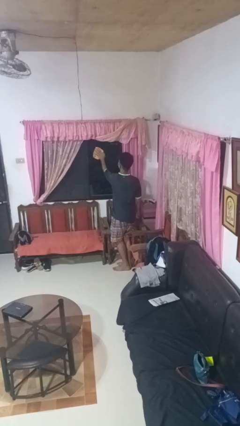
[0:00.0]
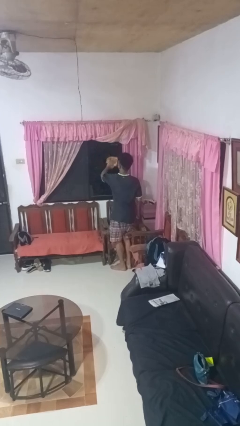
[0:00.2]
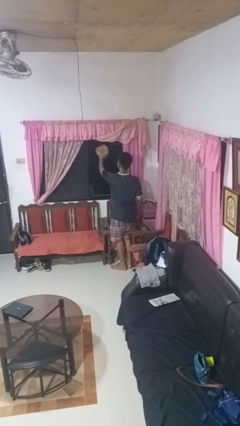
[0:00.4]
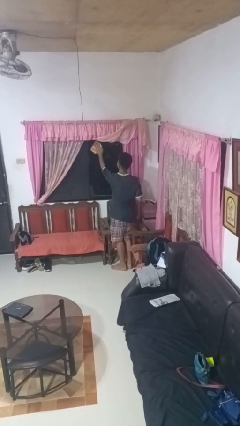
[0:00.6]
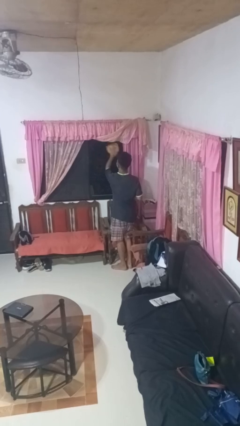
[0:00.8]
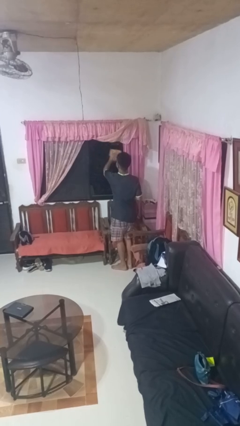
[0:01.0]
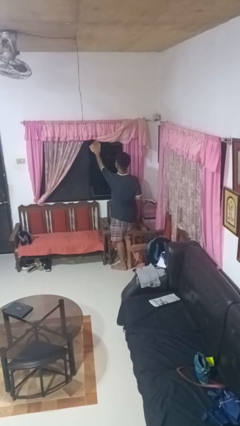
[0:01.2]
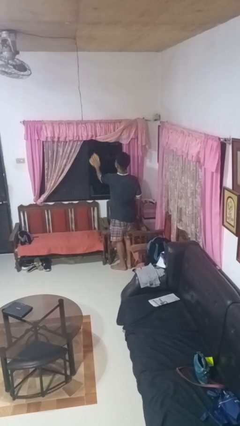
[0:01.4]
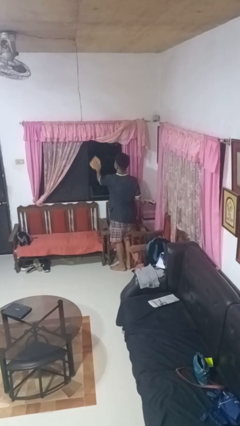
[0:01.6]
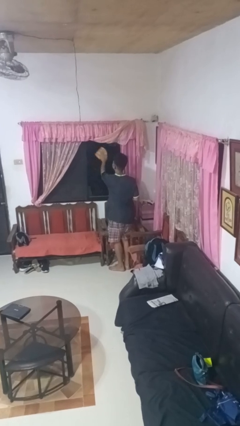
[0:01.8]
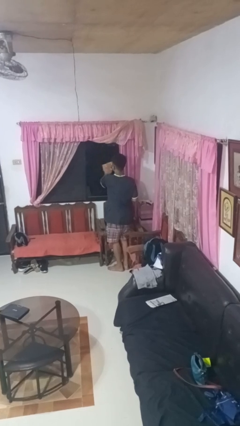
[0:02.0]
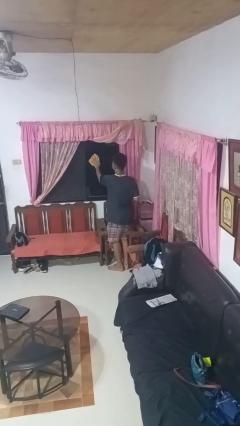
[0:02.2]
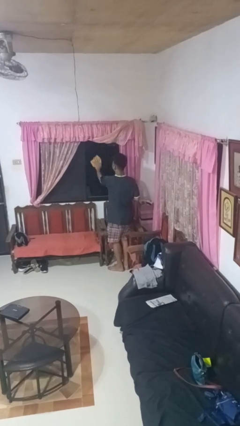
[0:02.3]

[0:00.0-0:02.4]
person washes window

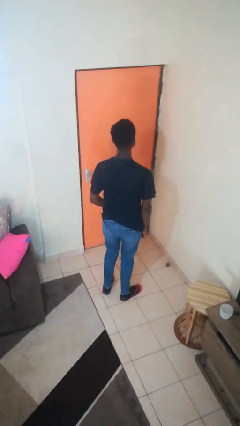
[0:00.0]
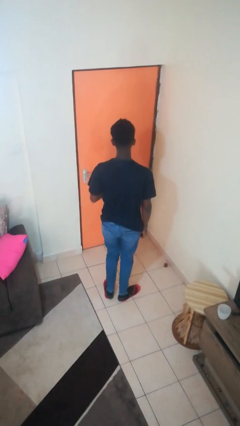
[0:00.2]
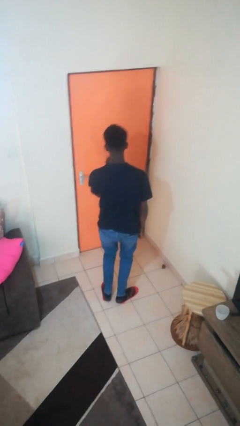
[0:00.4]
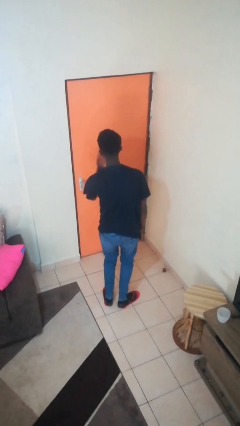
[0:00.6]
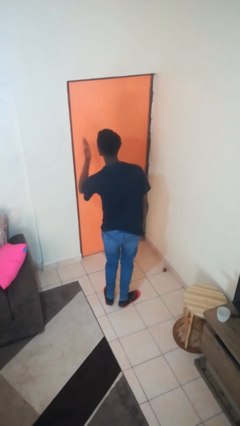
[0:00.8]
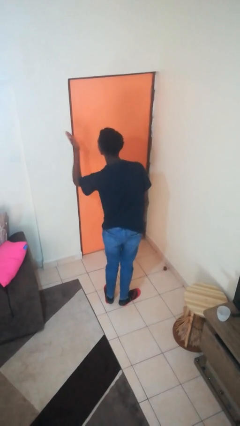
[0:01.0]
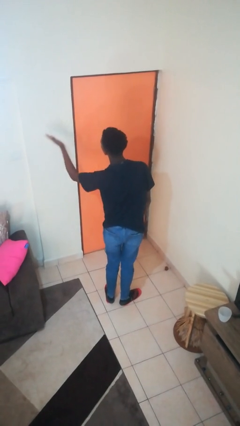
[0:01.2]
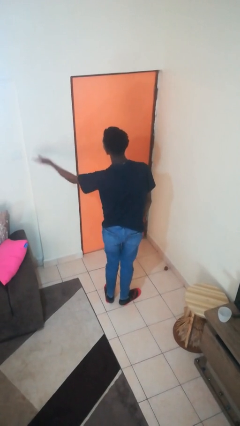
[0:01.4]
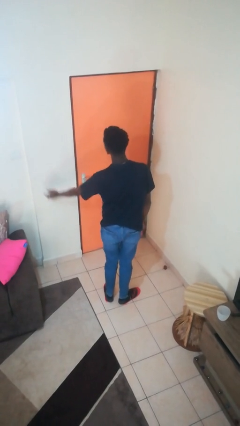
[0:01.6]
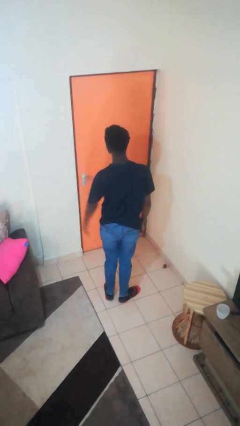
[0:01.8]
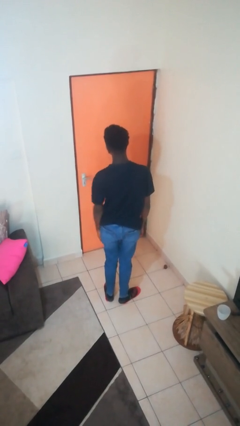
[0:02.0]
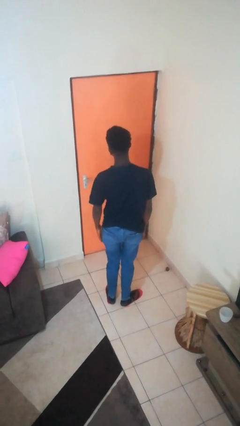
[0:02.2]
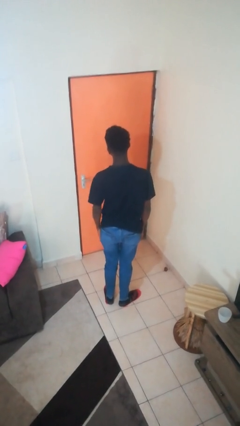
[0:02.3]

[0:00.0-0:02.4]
person gestures blow kiss

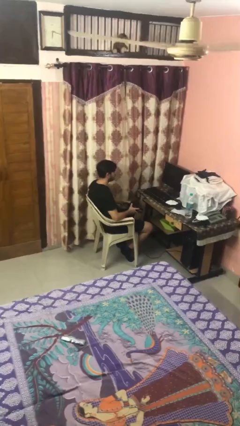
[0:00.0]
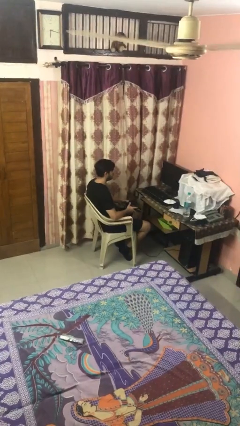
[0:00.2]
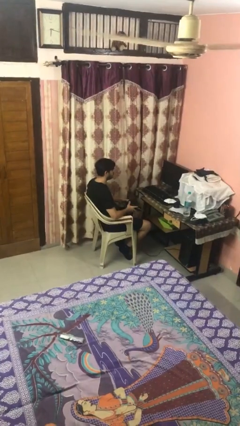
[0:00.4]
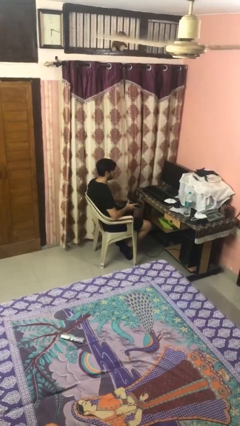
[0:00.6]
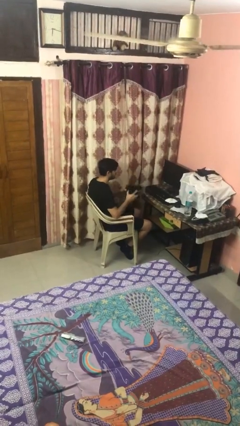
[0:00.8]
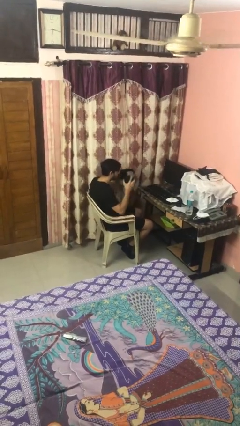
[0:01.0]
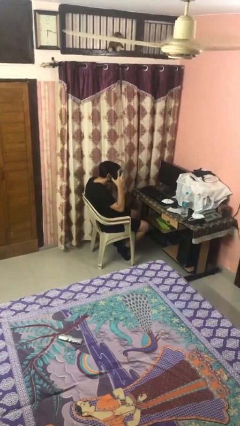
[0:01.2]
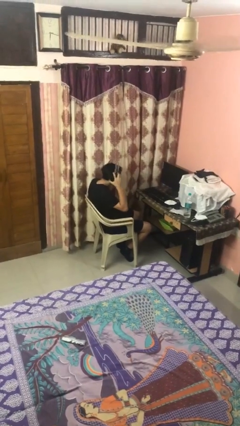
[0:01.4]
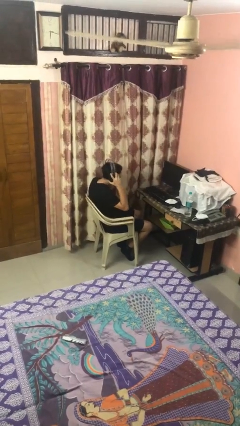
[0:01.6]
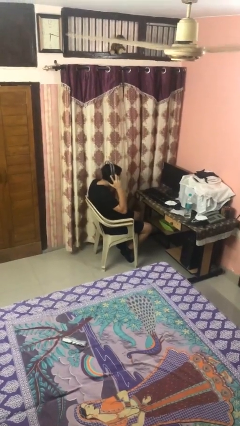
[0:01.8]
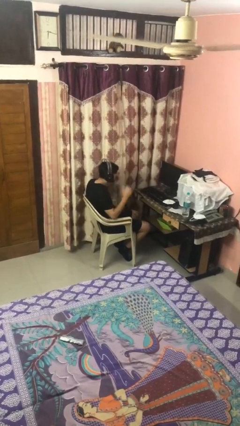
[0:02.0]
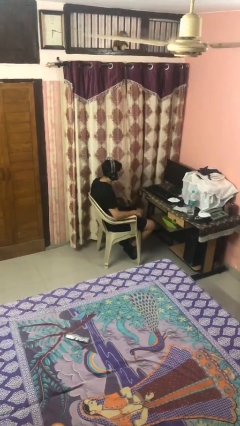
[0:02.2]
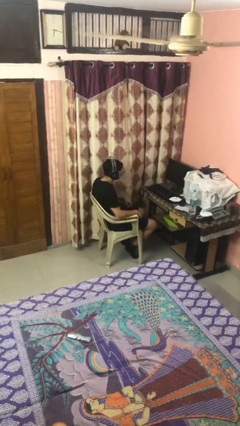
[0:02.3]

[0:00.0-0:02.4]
person puts on headphones

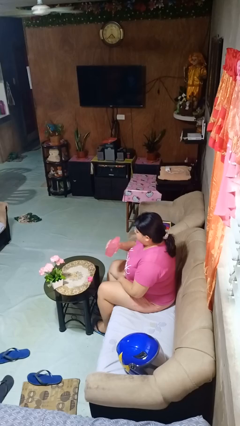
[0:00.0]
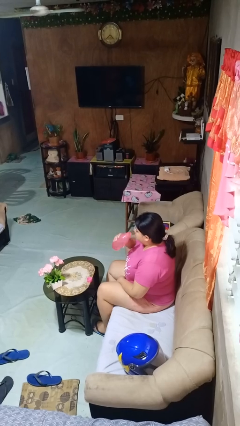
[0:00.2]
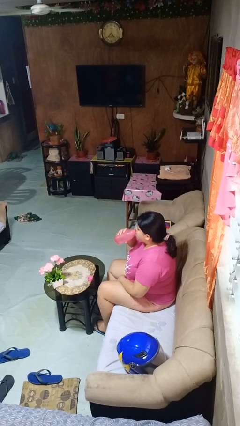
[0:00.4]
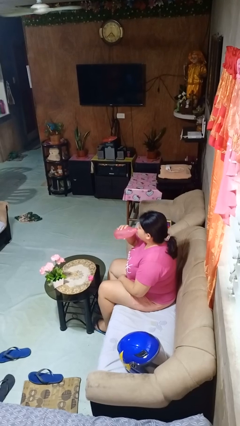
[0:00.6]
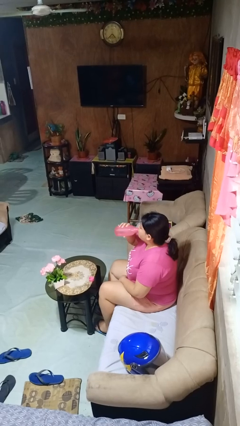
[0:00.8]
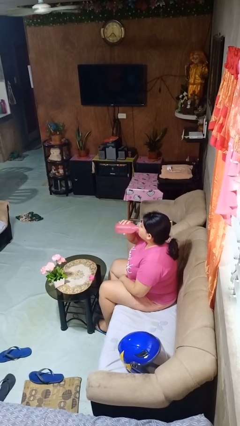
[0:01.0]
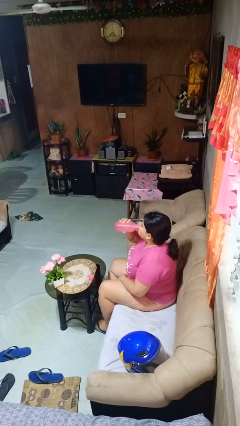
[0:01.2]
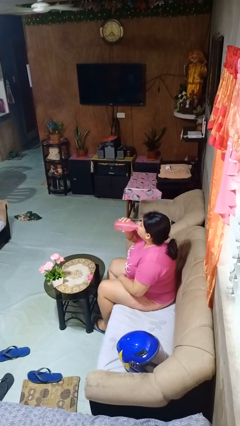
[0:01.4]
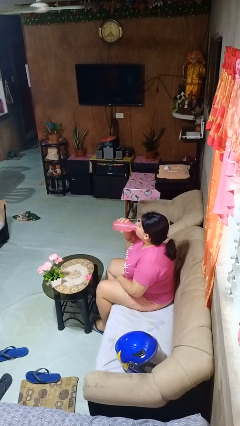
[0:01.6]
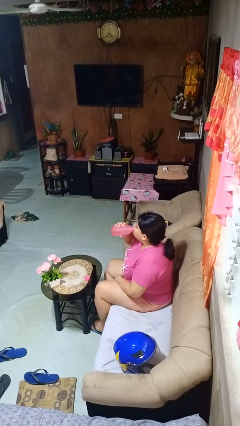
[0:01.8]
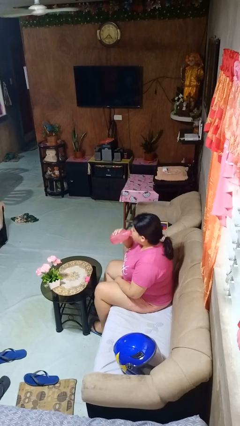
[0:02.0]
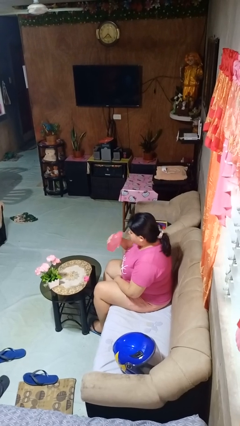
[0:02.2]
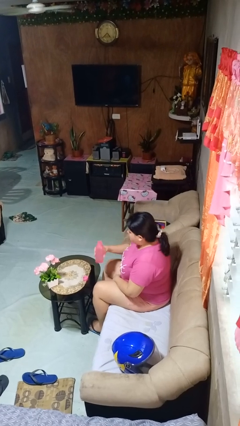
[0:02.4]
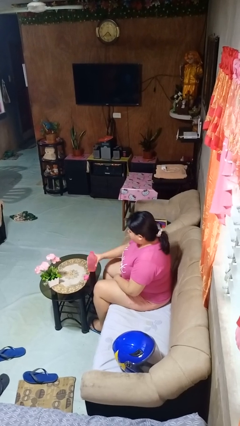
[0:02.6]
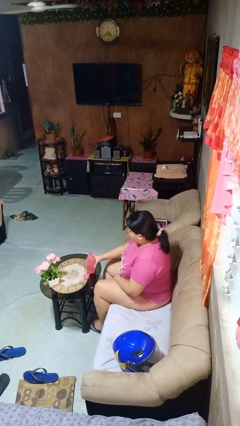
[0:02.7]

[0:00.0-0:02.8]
person drinks from bottle

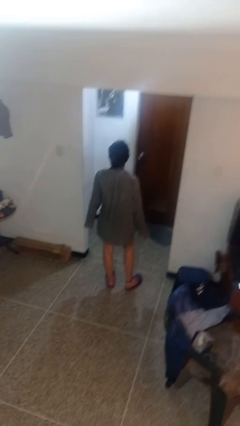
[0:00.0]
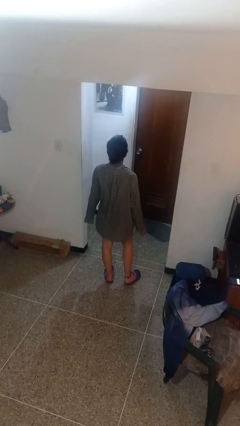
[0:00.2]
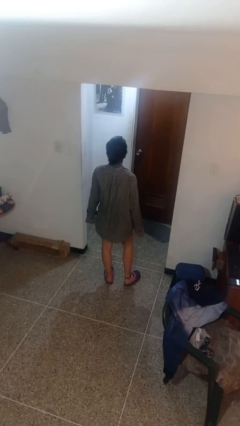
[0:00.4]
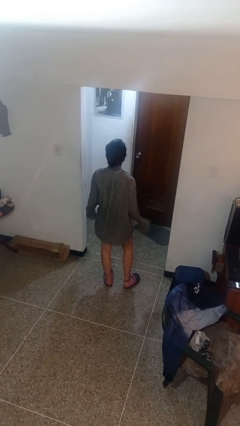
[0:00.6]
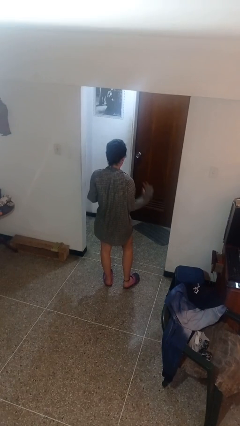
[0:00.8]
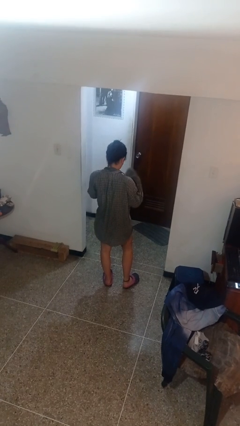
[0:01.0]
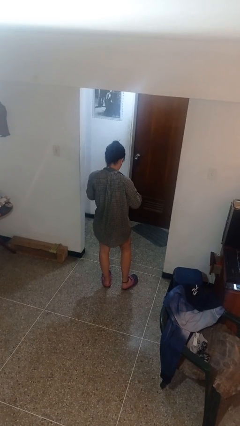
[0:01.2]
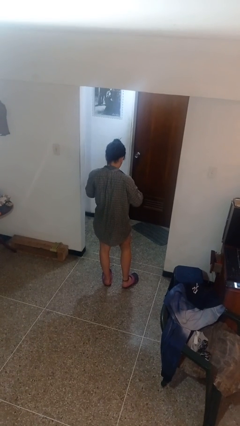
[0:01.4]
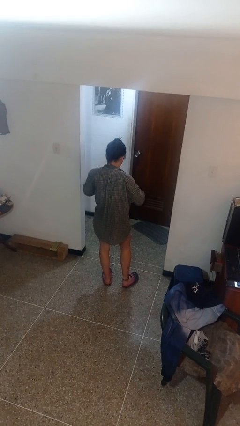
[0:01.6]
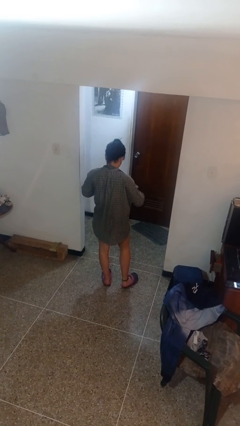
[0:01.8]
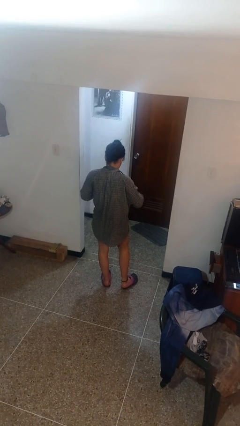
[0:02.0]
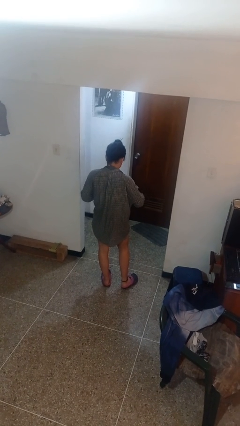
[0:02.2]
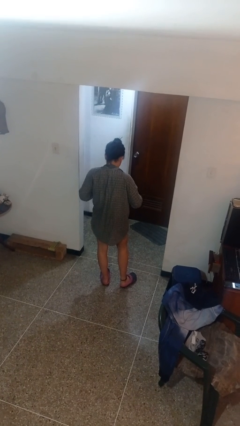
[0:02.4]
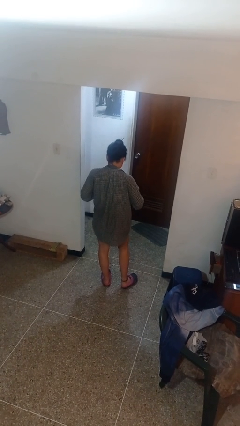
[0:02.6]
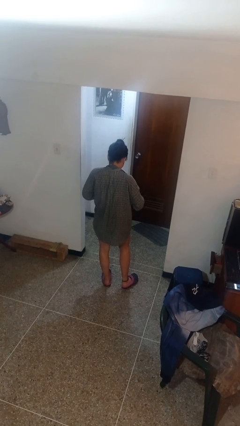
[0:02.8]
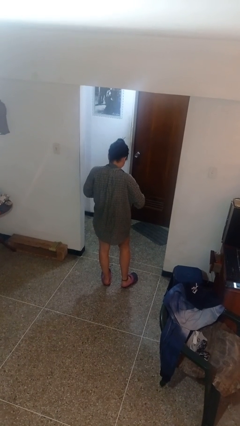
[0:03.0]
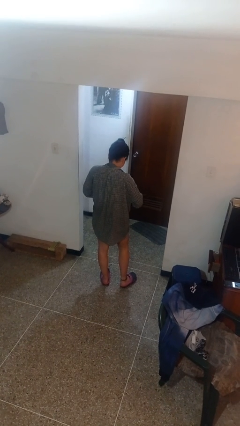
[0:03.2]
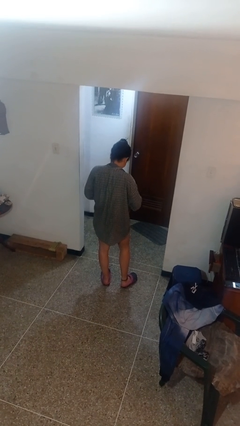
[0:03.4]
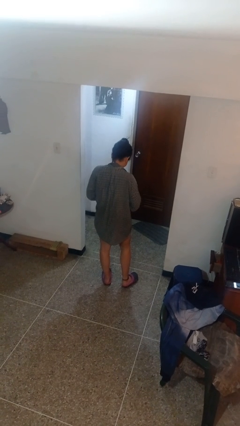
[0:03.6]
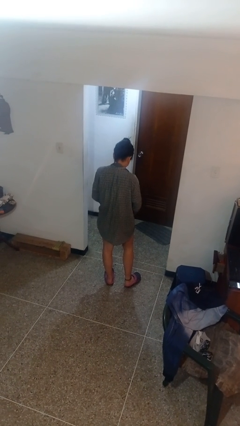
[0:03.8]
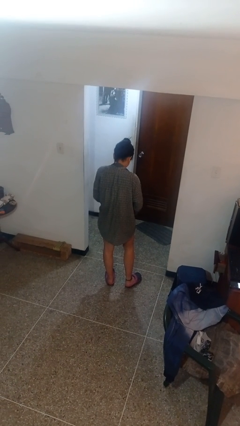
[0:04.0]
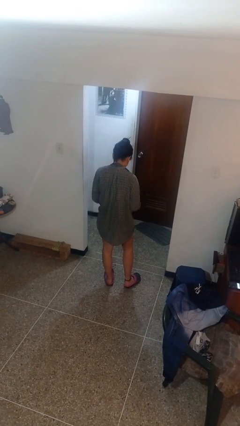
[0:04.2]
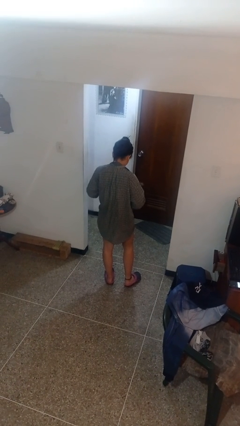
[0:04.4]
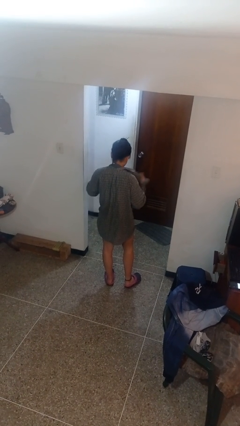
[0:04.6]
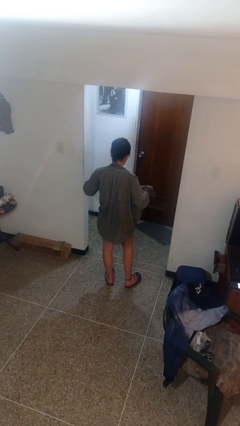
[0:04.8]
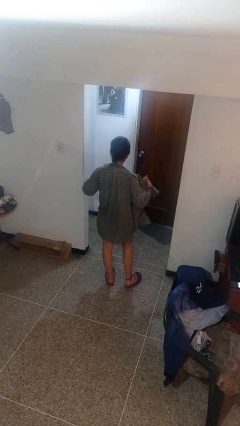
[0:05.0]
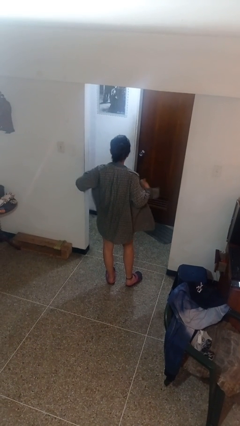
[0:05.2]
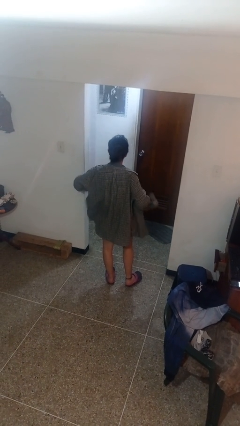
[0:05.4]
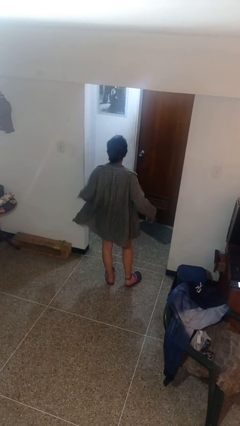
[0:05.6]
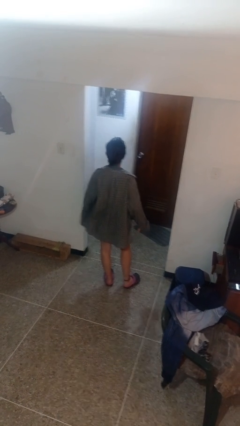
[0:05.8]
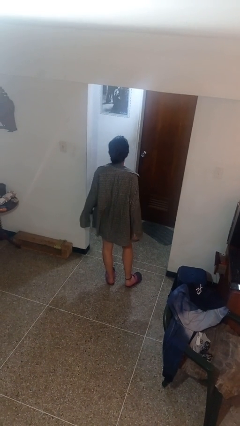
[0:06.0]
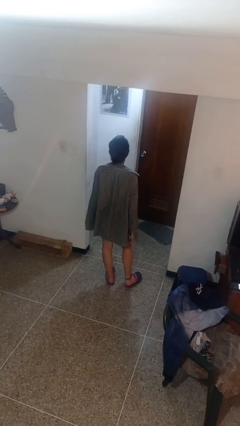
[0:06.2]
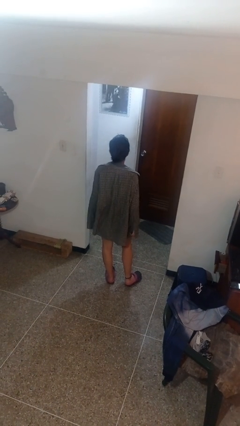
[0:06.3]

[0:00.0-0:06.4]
person unbuttons shirt

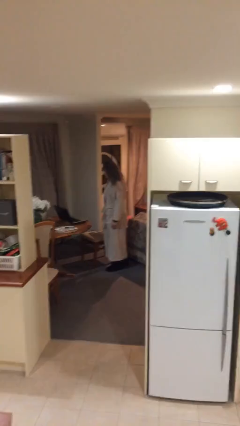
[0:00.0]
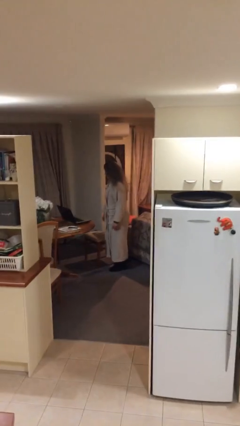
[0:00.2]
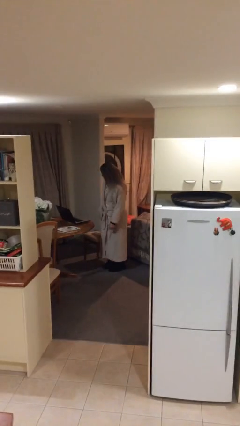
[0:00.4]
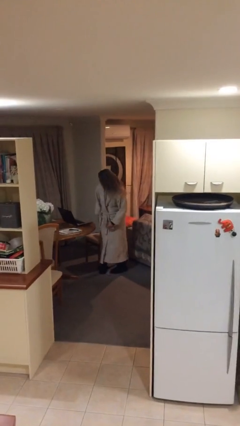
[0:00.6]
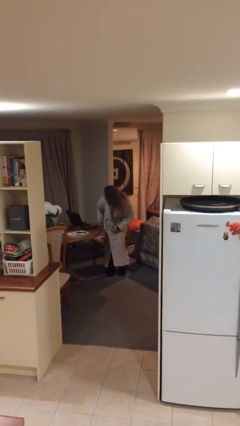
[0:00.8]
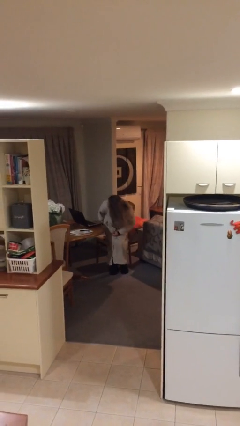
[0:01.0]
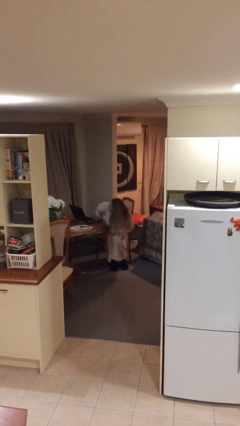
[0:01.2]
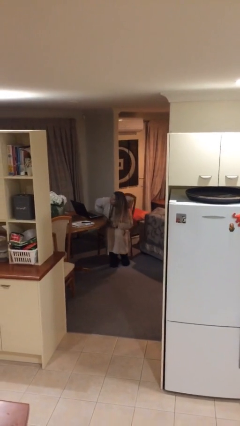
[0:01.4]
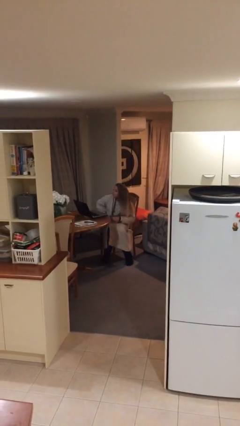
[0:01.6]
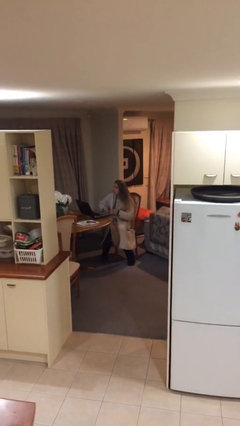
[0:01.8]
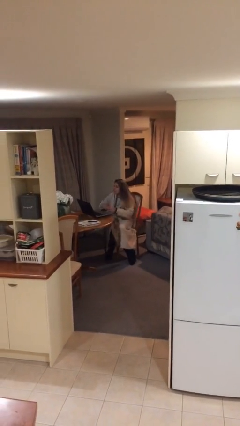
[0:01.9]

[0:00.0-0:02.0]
person sits down
